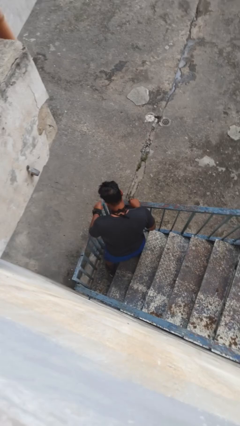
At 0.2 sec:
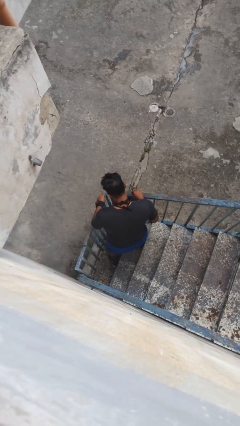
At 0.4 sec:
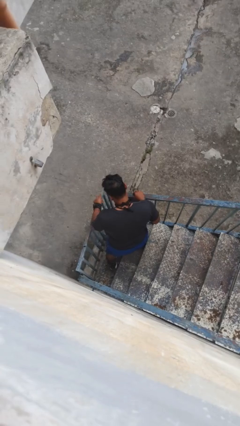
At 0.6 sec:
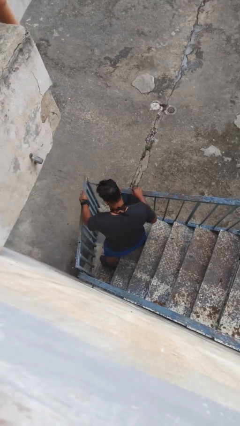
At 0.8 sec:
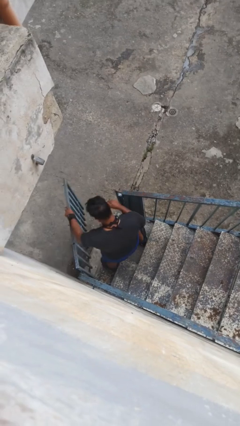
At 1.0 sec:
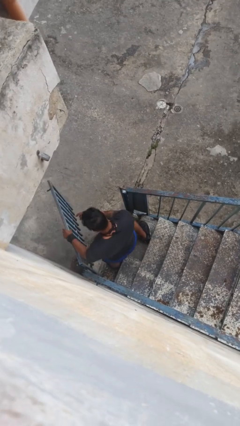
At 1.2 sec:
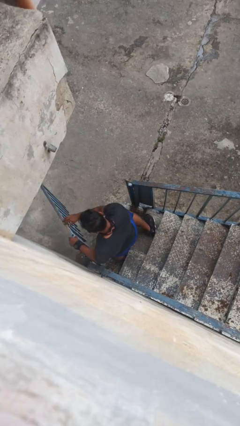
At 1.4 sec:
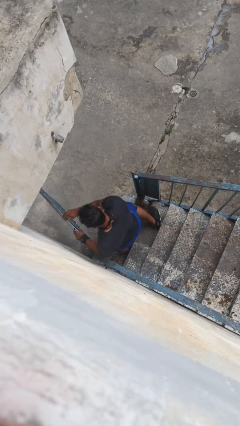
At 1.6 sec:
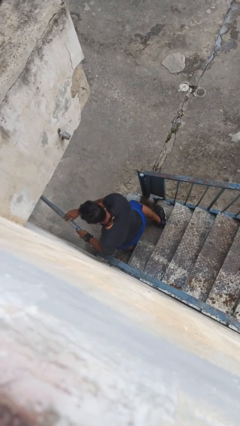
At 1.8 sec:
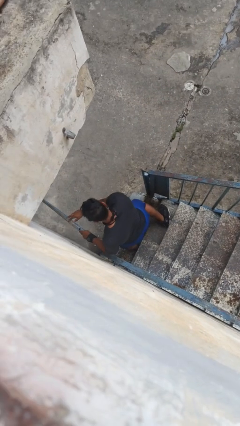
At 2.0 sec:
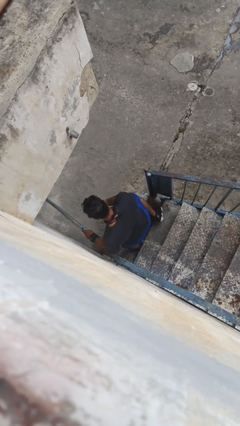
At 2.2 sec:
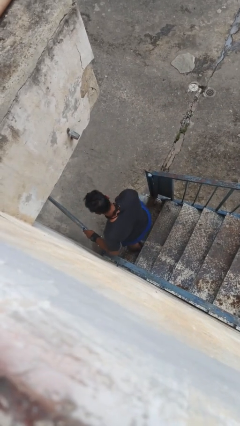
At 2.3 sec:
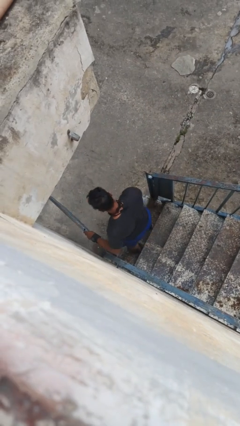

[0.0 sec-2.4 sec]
person opens facility door

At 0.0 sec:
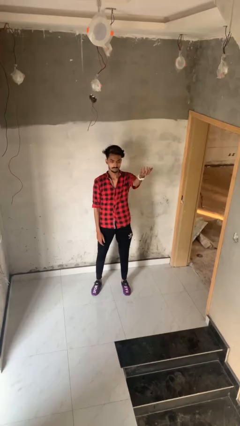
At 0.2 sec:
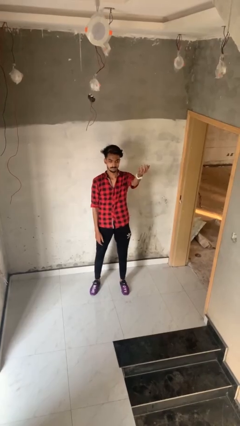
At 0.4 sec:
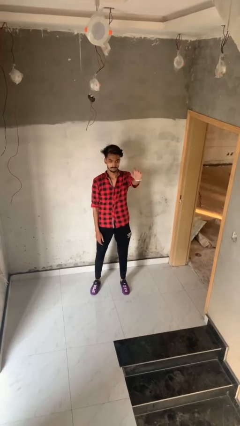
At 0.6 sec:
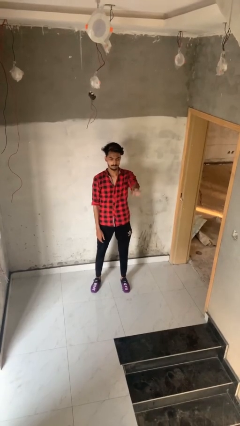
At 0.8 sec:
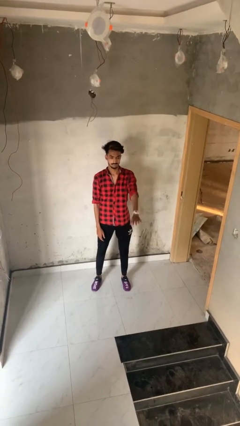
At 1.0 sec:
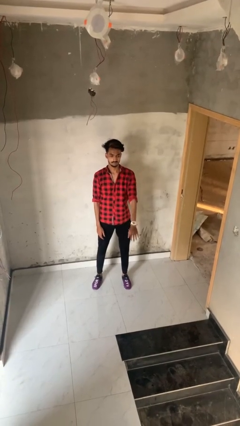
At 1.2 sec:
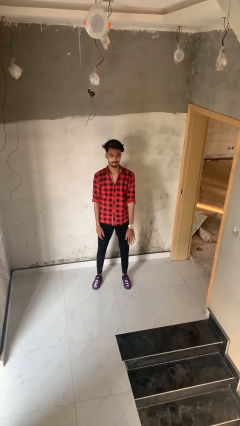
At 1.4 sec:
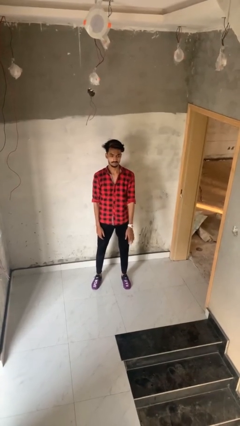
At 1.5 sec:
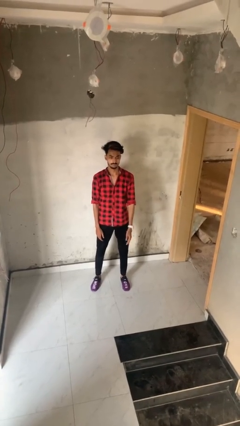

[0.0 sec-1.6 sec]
person gestures swipe down

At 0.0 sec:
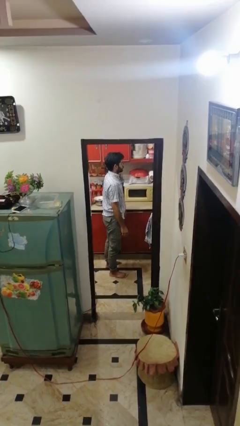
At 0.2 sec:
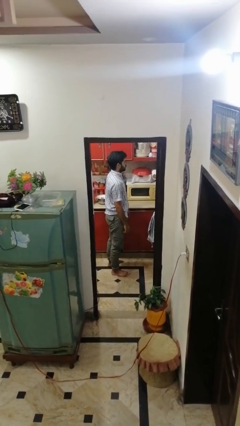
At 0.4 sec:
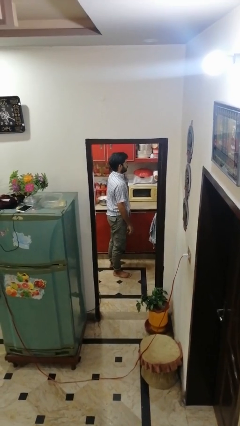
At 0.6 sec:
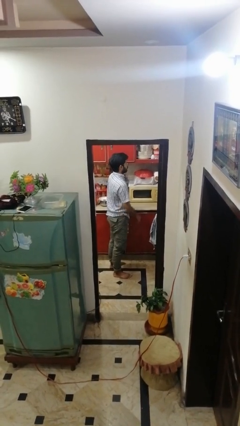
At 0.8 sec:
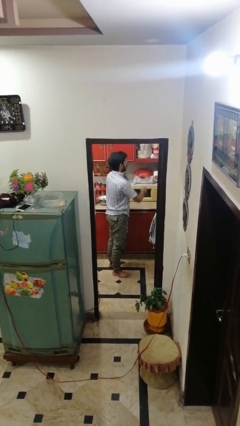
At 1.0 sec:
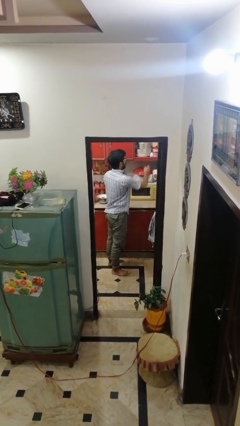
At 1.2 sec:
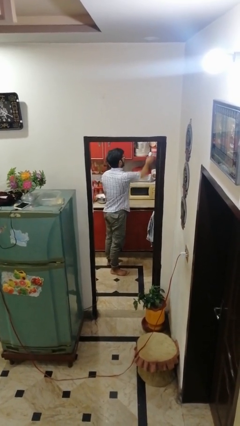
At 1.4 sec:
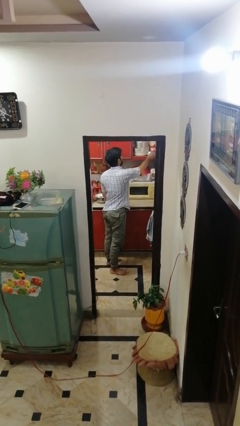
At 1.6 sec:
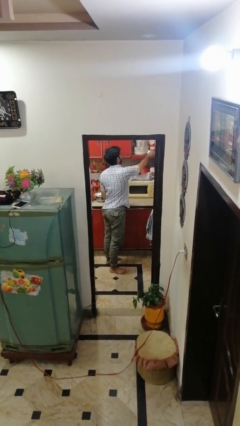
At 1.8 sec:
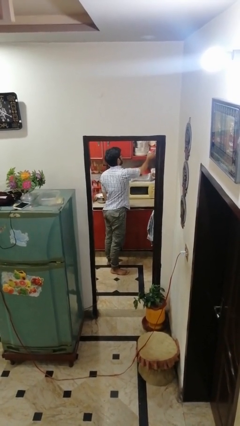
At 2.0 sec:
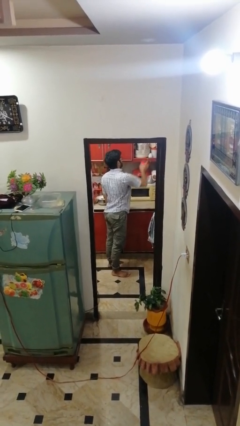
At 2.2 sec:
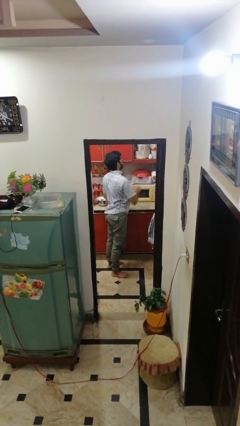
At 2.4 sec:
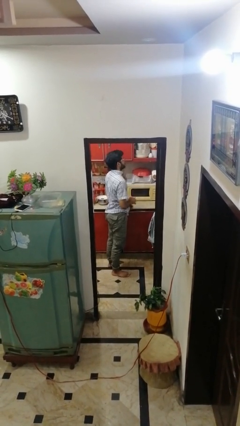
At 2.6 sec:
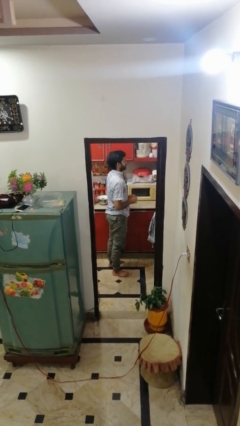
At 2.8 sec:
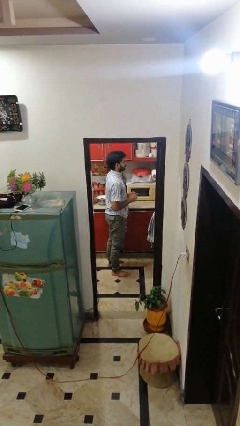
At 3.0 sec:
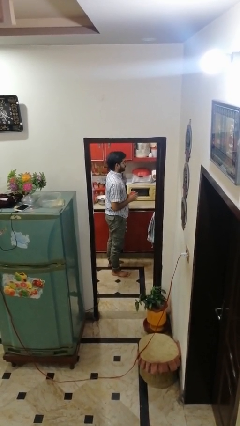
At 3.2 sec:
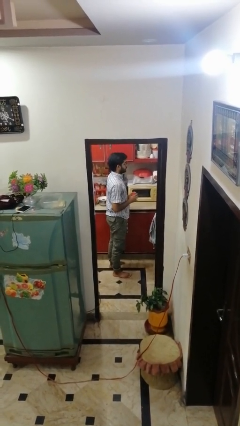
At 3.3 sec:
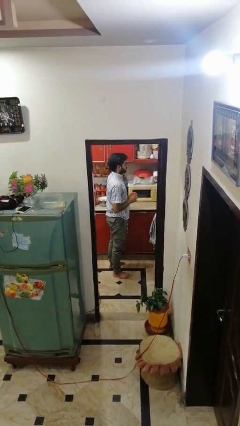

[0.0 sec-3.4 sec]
person picks up object from cabinet

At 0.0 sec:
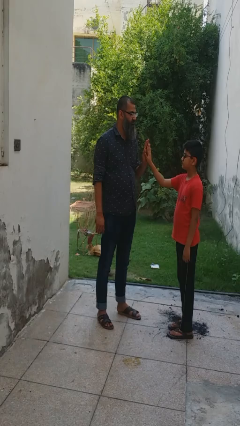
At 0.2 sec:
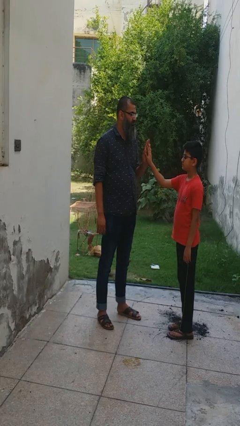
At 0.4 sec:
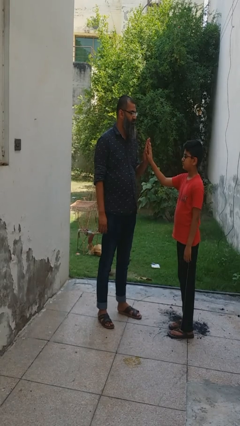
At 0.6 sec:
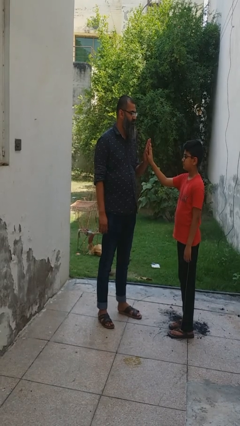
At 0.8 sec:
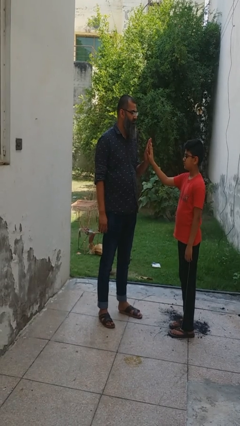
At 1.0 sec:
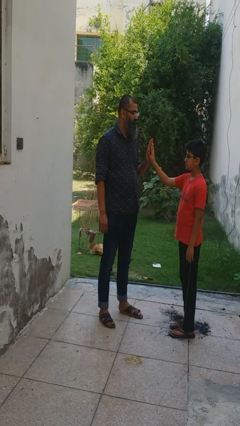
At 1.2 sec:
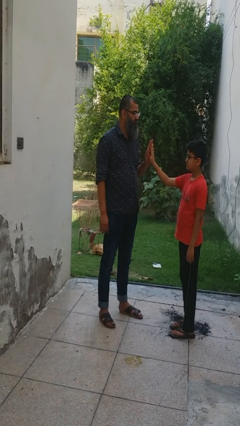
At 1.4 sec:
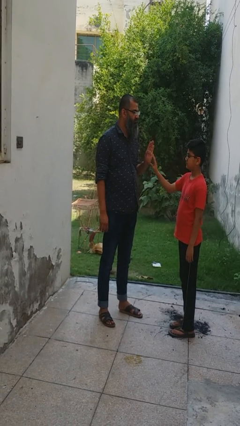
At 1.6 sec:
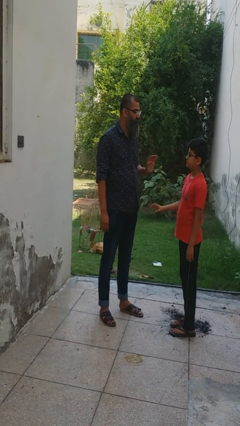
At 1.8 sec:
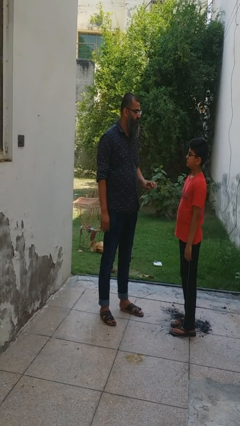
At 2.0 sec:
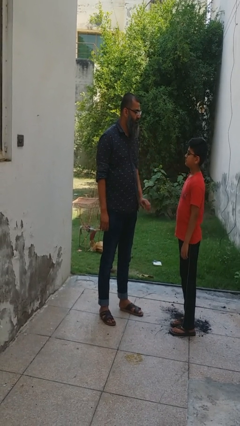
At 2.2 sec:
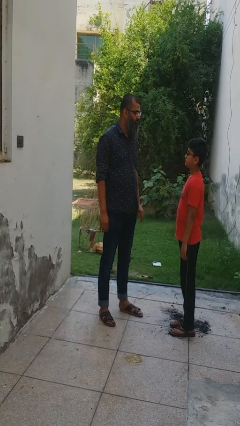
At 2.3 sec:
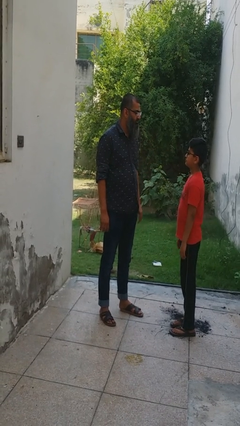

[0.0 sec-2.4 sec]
person highfives hand

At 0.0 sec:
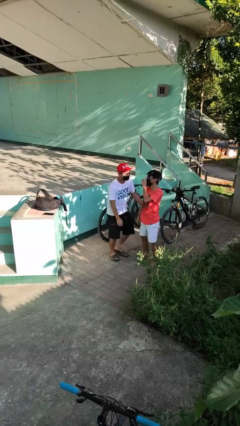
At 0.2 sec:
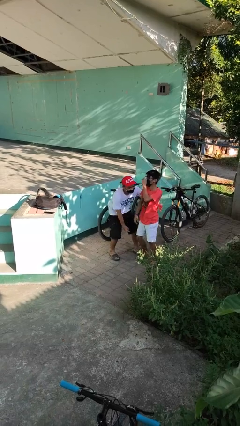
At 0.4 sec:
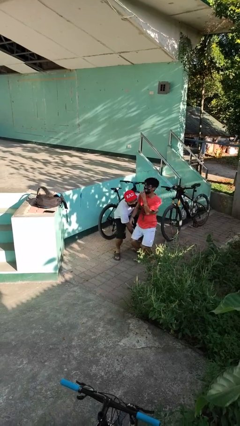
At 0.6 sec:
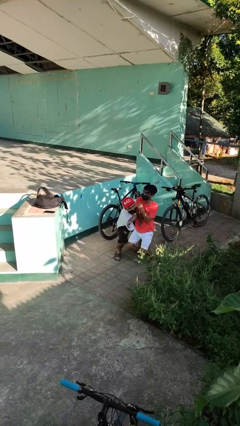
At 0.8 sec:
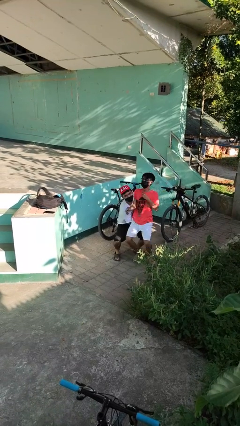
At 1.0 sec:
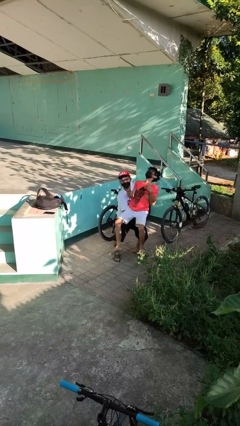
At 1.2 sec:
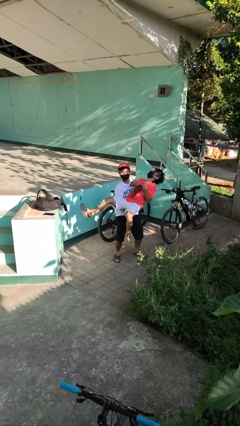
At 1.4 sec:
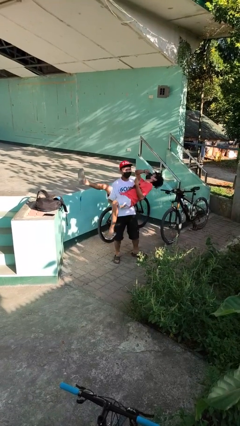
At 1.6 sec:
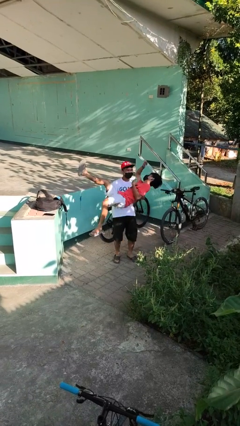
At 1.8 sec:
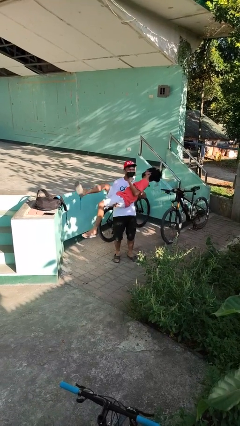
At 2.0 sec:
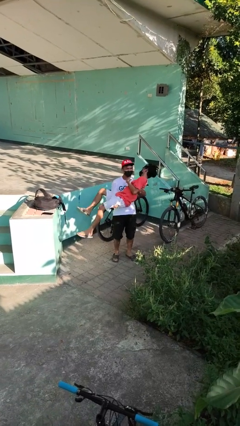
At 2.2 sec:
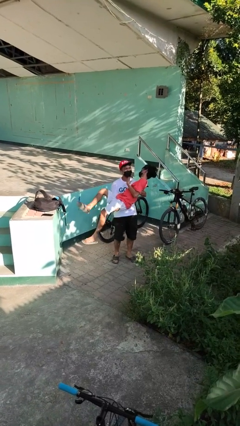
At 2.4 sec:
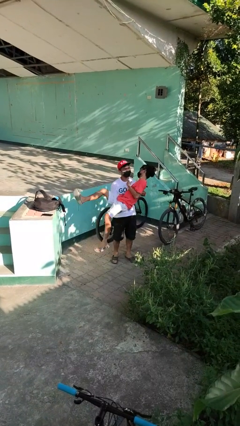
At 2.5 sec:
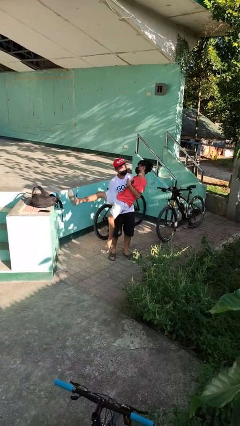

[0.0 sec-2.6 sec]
person picks up person

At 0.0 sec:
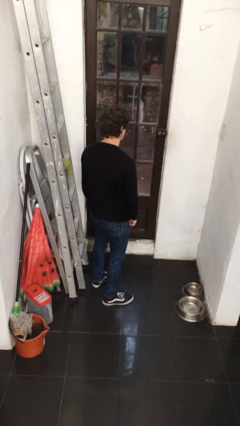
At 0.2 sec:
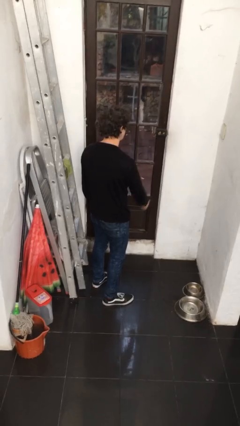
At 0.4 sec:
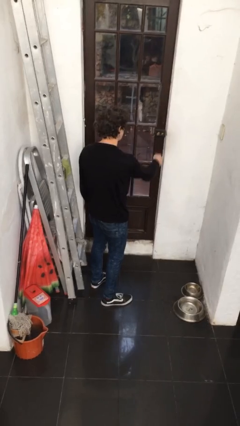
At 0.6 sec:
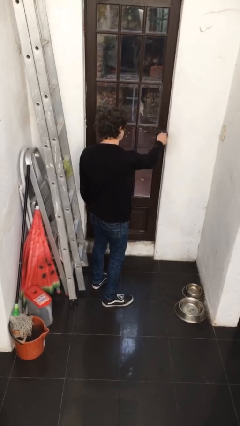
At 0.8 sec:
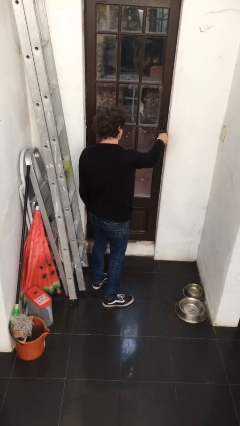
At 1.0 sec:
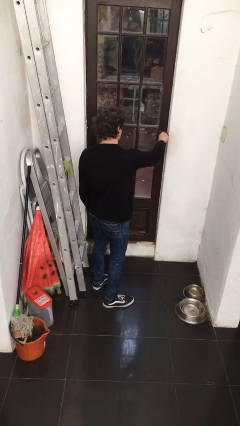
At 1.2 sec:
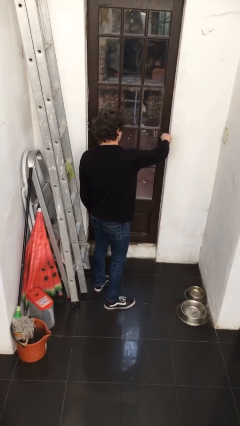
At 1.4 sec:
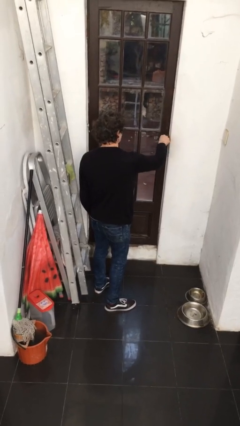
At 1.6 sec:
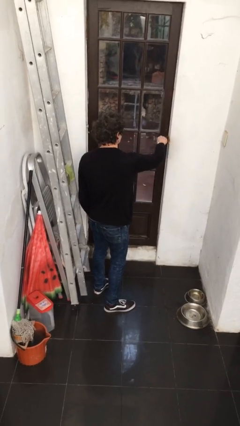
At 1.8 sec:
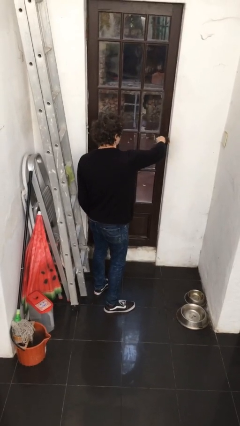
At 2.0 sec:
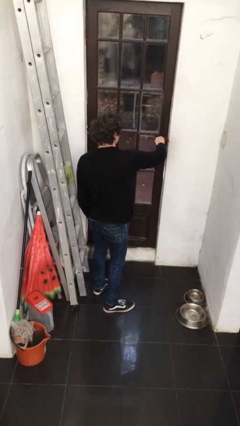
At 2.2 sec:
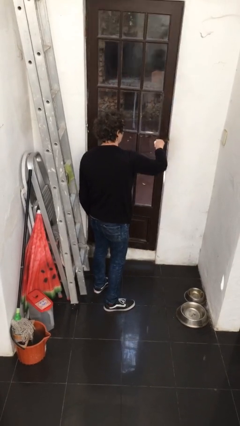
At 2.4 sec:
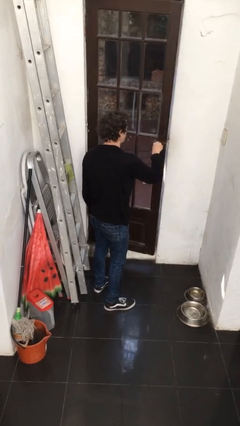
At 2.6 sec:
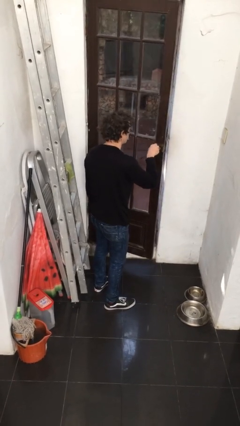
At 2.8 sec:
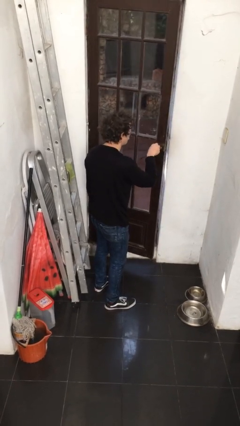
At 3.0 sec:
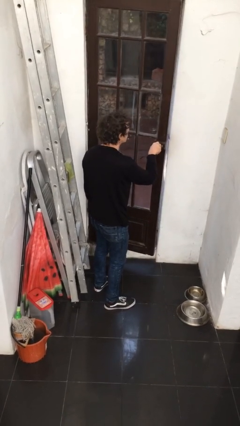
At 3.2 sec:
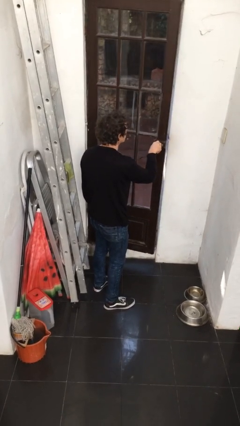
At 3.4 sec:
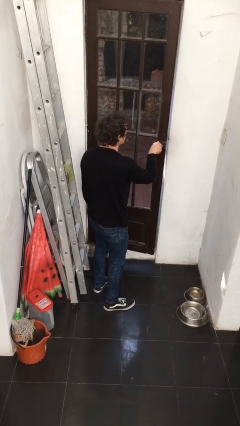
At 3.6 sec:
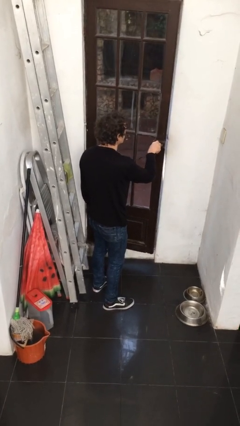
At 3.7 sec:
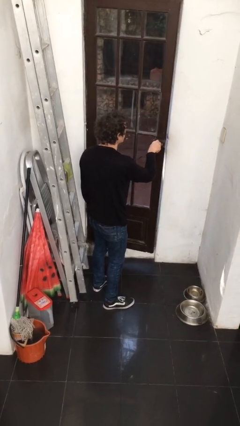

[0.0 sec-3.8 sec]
person unlocks door with keys

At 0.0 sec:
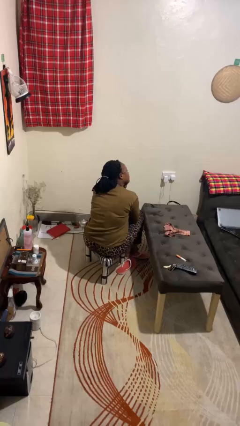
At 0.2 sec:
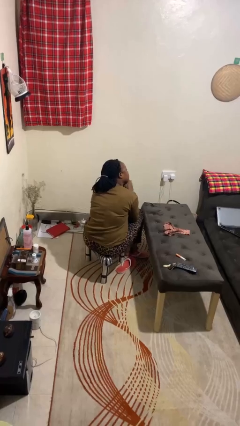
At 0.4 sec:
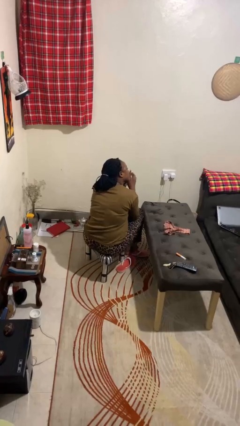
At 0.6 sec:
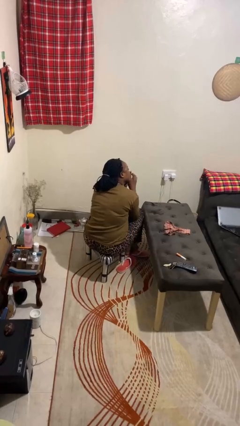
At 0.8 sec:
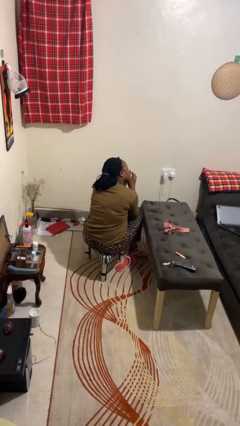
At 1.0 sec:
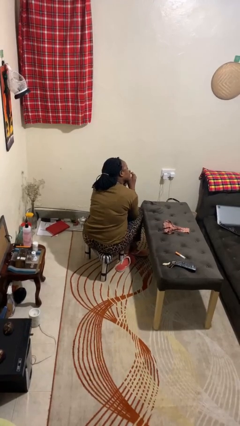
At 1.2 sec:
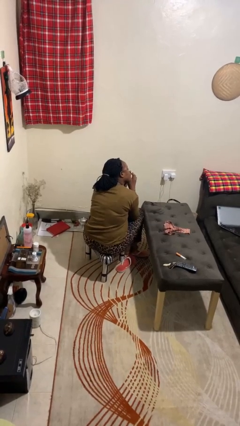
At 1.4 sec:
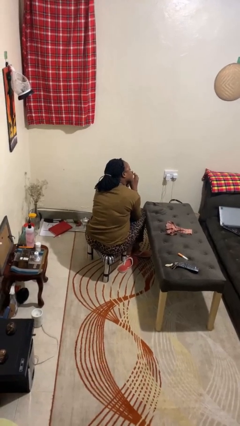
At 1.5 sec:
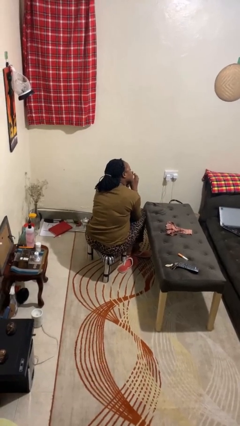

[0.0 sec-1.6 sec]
person gestures be quiet
